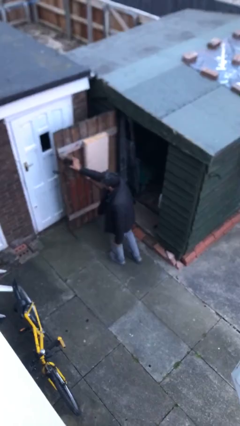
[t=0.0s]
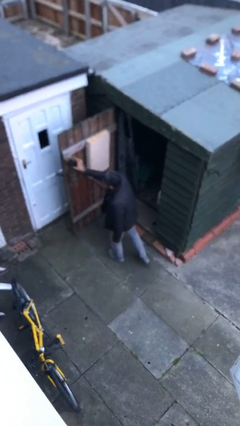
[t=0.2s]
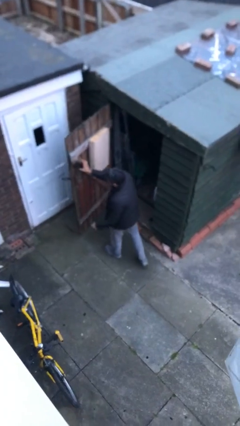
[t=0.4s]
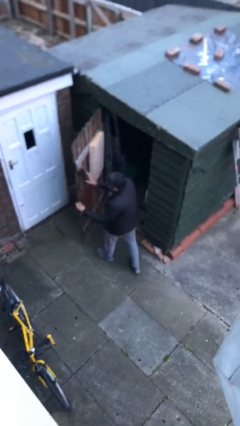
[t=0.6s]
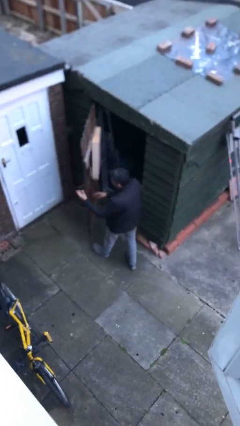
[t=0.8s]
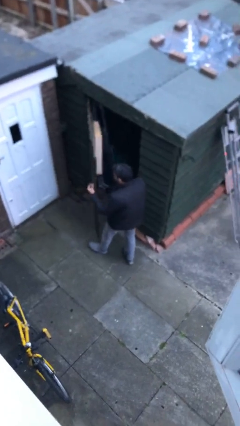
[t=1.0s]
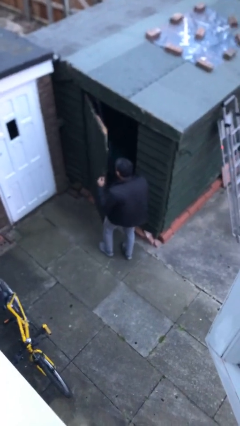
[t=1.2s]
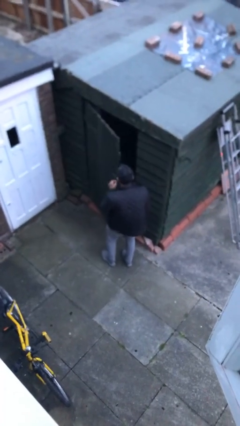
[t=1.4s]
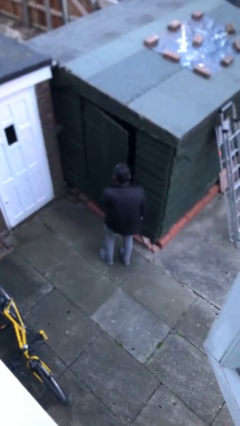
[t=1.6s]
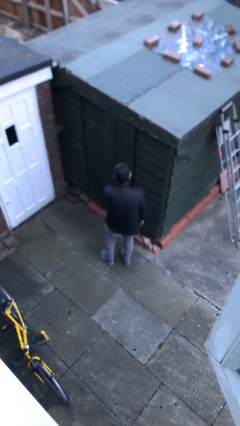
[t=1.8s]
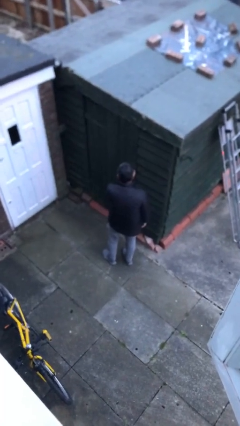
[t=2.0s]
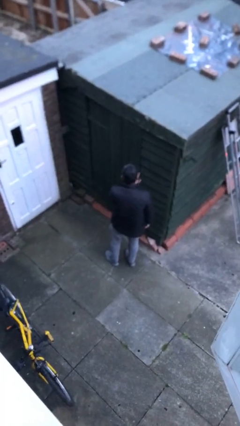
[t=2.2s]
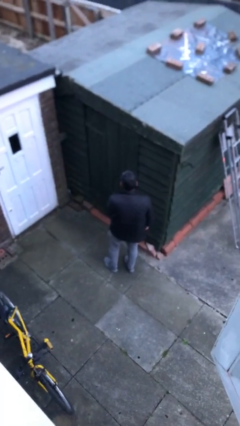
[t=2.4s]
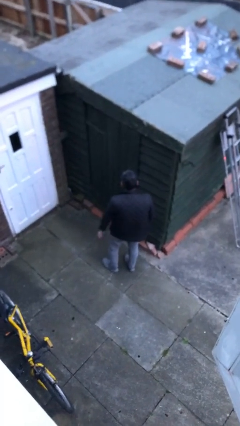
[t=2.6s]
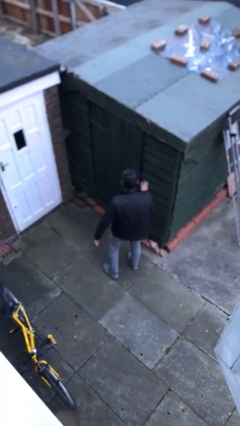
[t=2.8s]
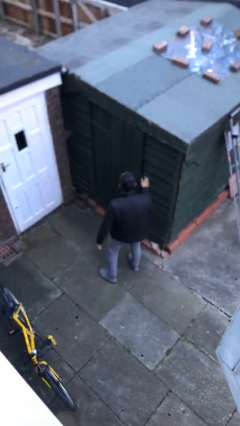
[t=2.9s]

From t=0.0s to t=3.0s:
person closes facility door

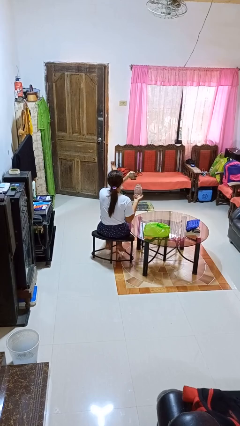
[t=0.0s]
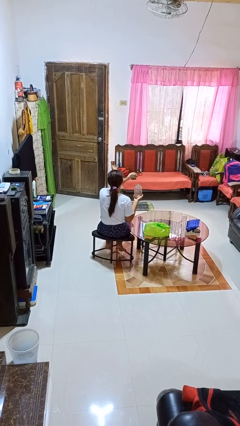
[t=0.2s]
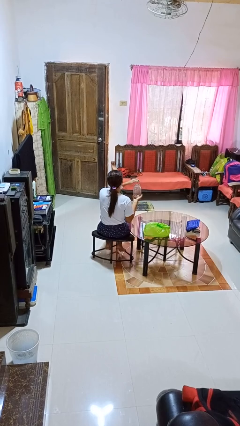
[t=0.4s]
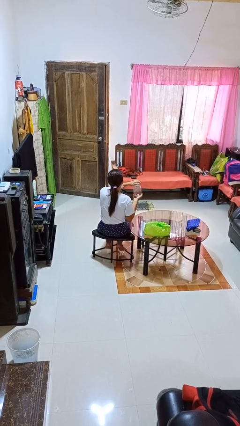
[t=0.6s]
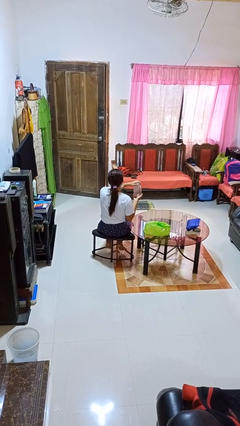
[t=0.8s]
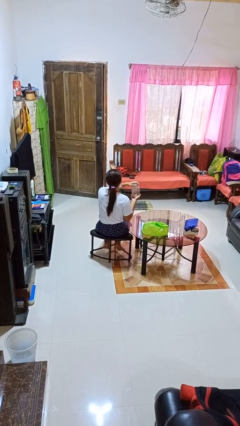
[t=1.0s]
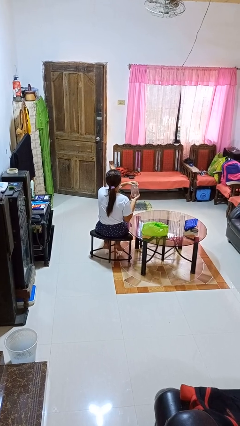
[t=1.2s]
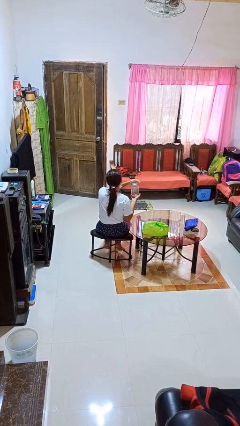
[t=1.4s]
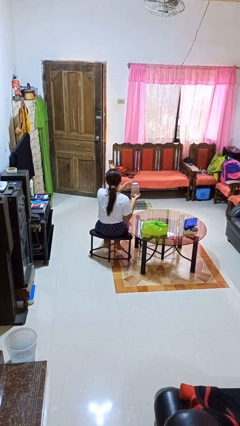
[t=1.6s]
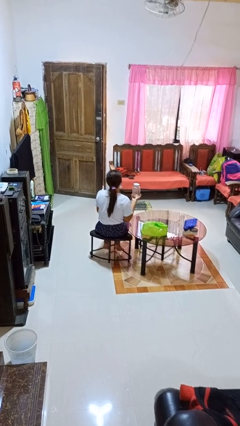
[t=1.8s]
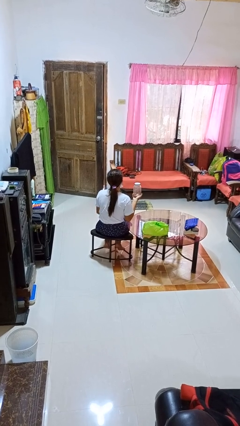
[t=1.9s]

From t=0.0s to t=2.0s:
person closes jar

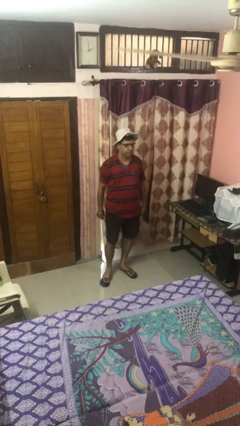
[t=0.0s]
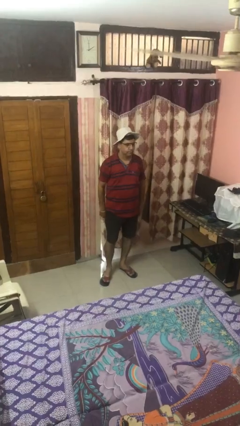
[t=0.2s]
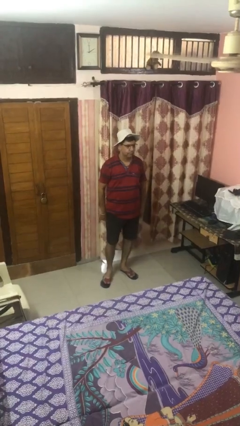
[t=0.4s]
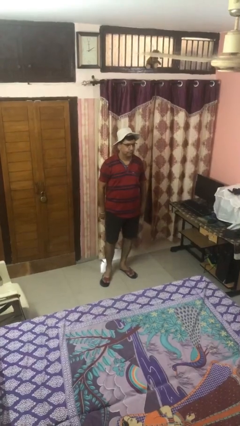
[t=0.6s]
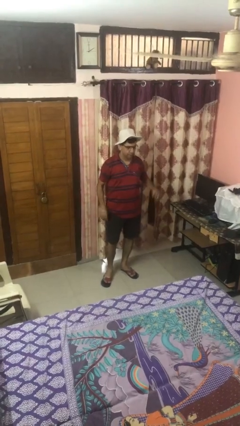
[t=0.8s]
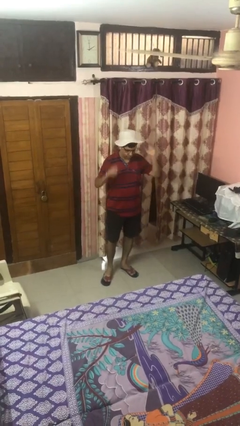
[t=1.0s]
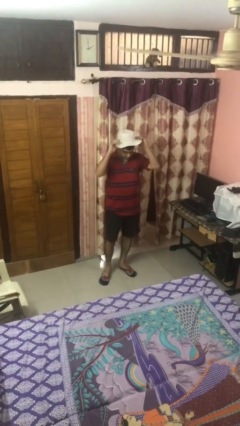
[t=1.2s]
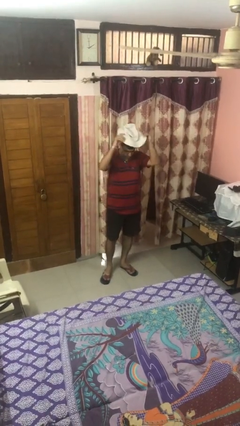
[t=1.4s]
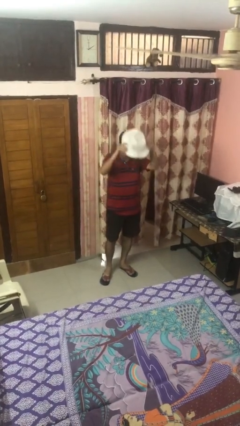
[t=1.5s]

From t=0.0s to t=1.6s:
person takes off hat

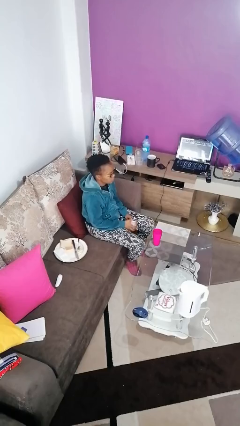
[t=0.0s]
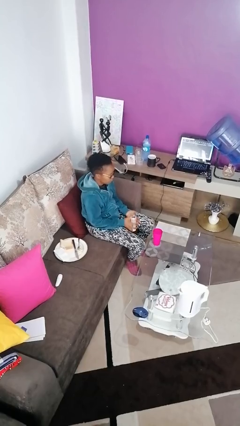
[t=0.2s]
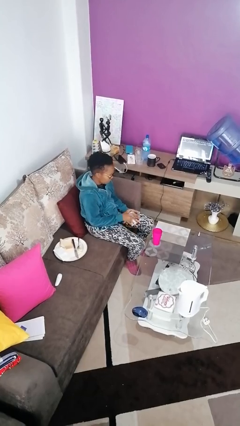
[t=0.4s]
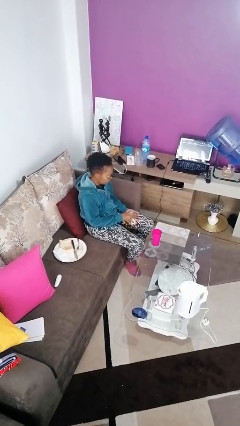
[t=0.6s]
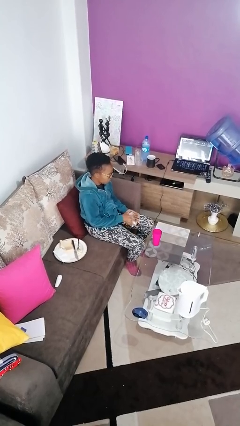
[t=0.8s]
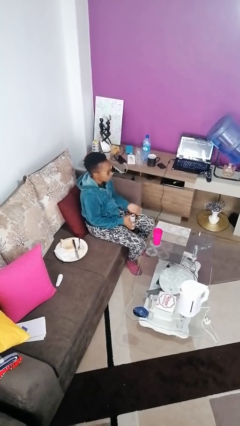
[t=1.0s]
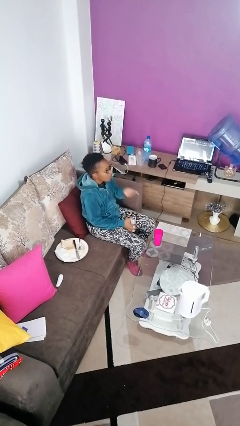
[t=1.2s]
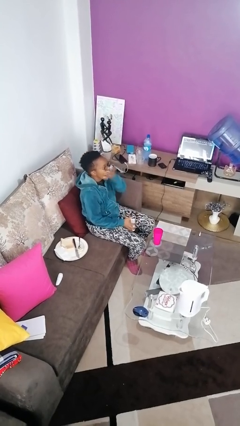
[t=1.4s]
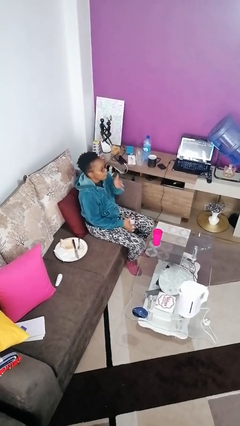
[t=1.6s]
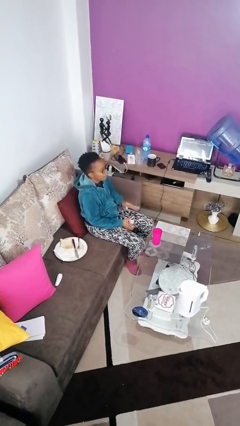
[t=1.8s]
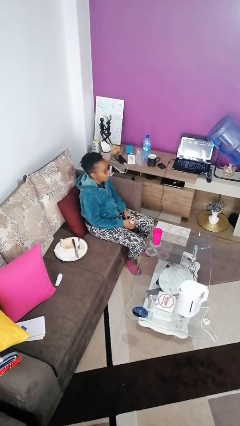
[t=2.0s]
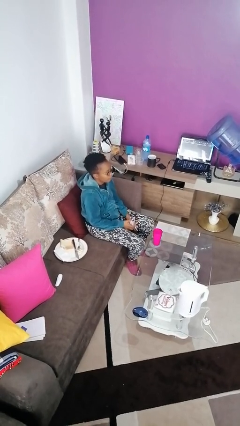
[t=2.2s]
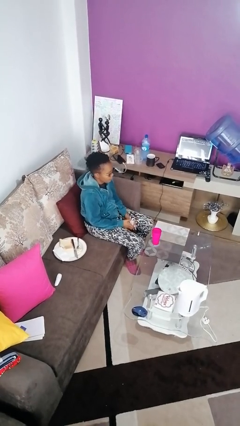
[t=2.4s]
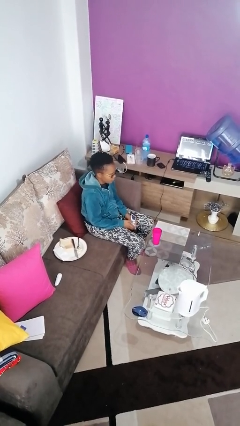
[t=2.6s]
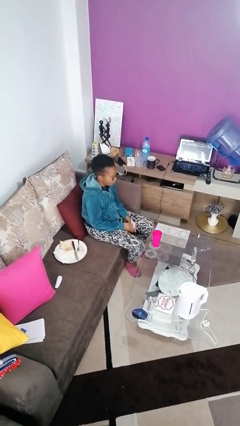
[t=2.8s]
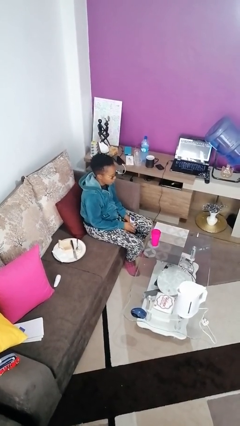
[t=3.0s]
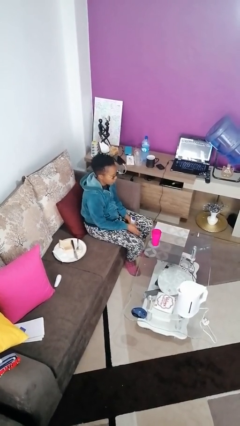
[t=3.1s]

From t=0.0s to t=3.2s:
person takes medicine pills

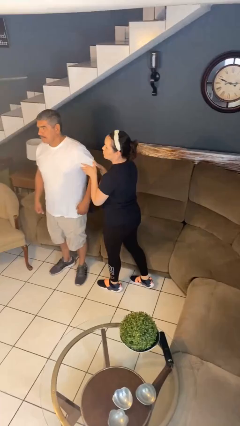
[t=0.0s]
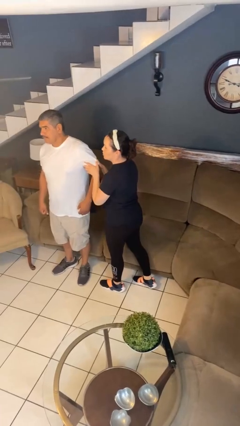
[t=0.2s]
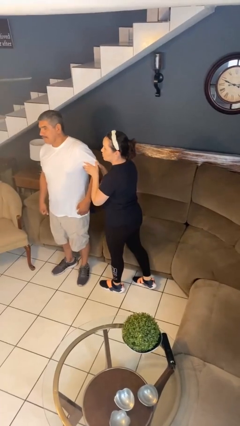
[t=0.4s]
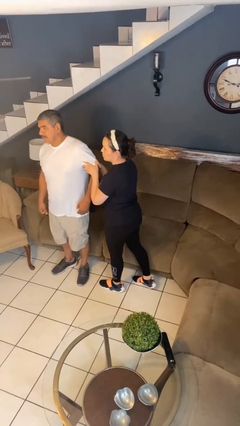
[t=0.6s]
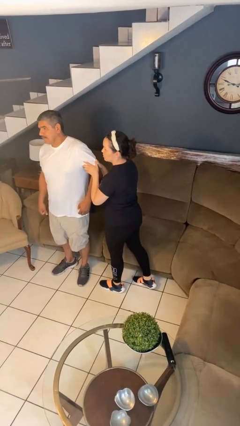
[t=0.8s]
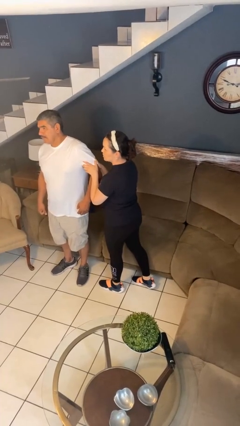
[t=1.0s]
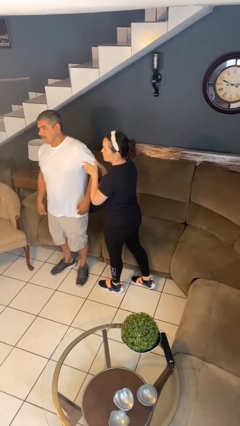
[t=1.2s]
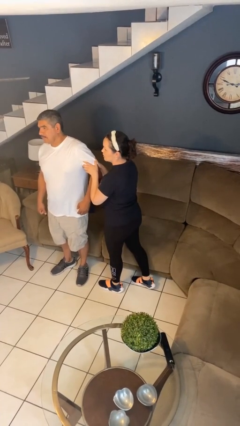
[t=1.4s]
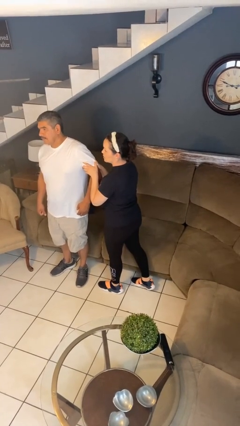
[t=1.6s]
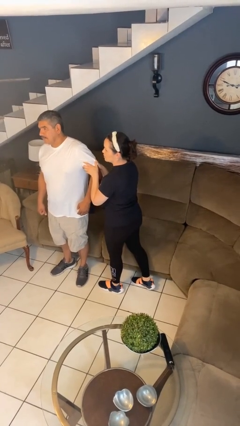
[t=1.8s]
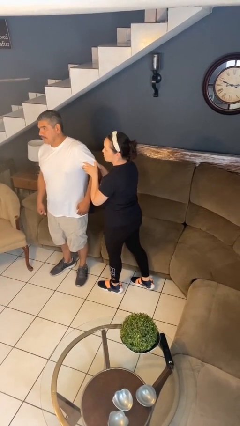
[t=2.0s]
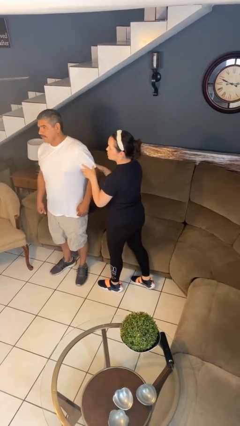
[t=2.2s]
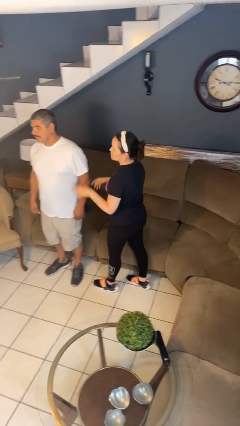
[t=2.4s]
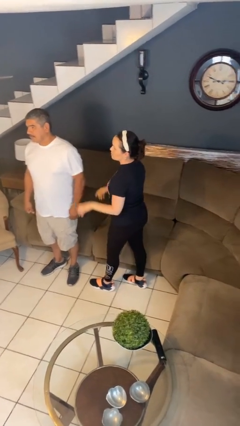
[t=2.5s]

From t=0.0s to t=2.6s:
person grabs person by bicep

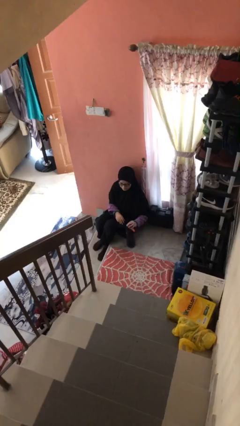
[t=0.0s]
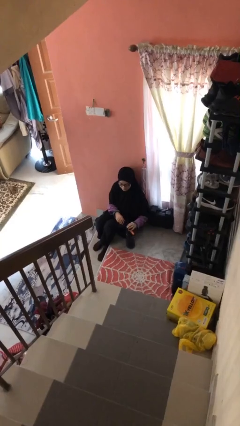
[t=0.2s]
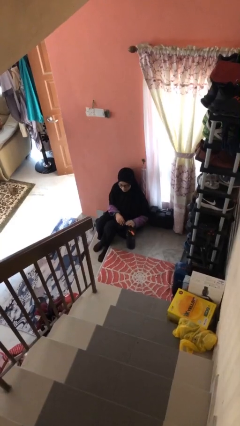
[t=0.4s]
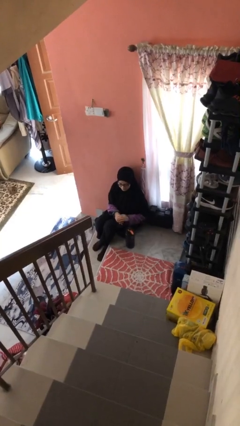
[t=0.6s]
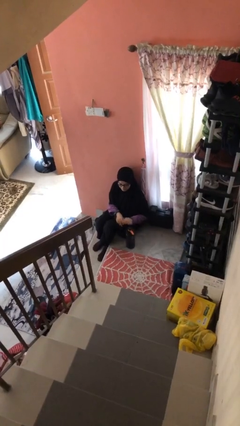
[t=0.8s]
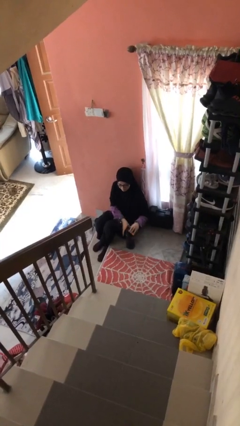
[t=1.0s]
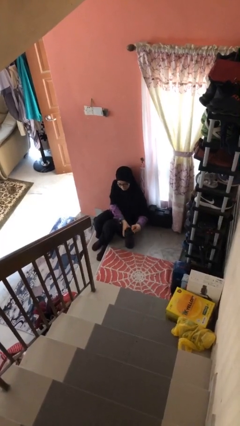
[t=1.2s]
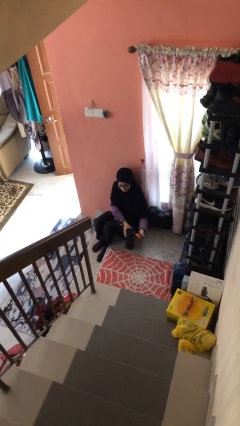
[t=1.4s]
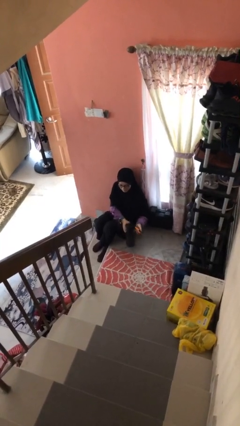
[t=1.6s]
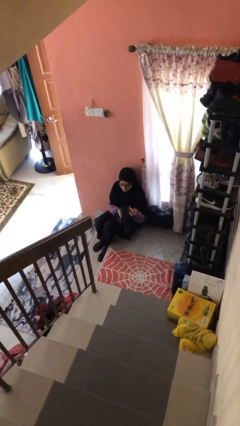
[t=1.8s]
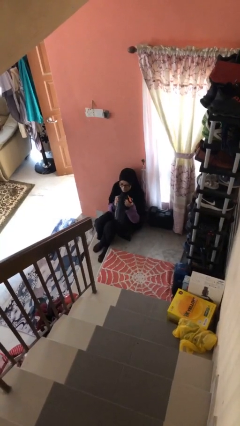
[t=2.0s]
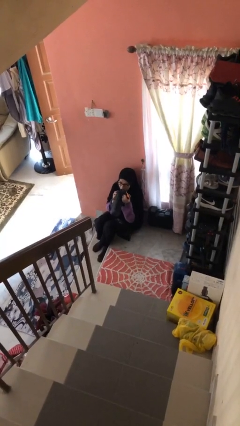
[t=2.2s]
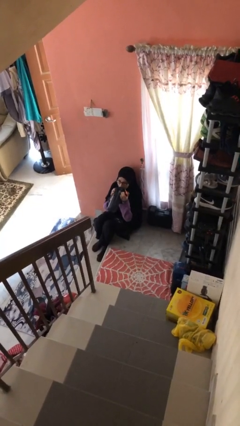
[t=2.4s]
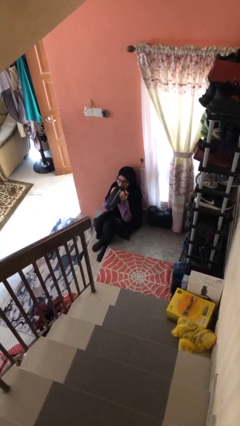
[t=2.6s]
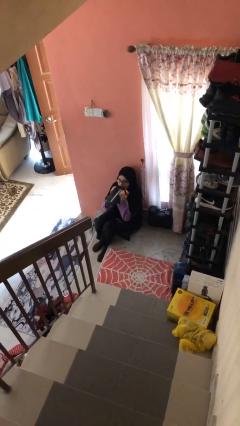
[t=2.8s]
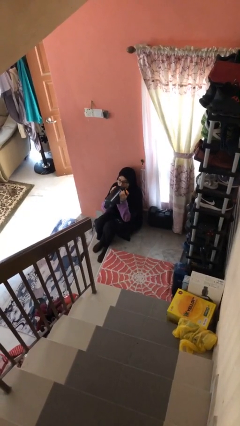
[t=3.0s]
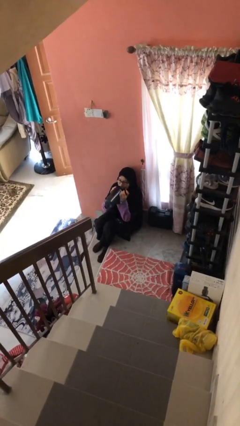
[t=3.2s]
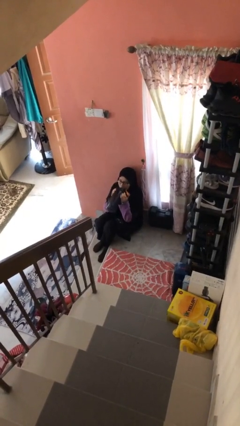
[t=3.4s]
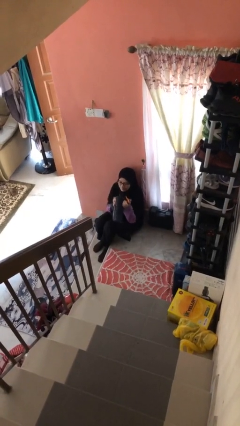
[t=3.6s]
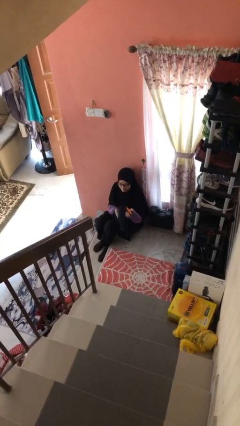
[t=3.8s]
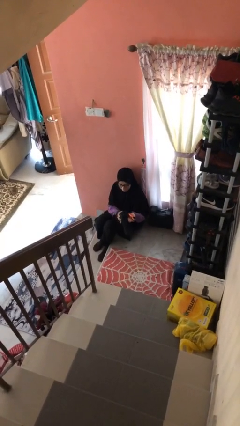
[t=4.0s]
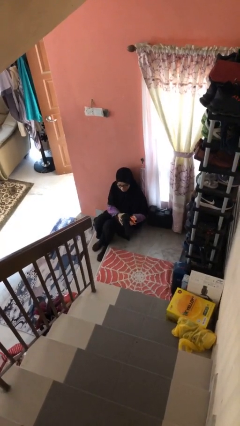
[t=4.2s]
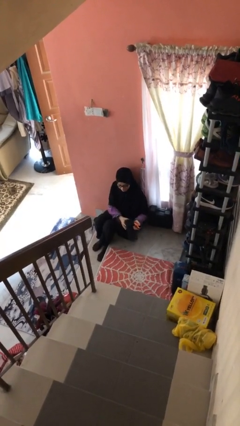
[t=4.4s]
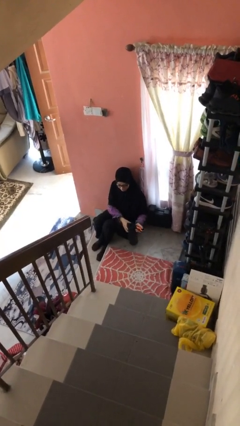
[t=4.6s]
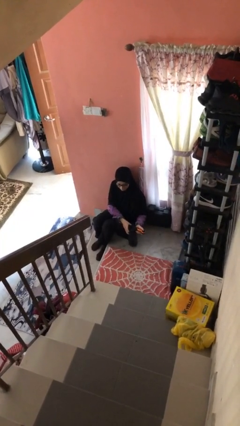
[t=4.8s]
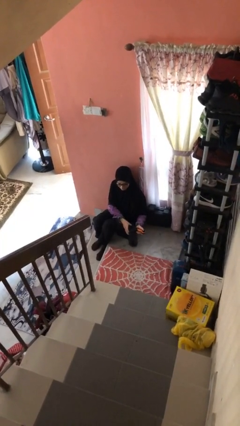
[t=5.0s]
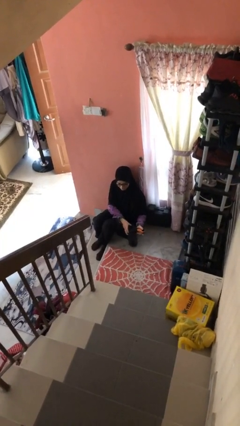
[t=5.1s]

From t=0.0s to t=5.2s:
person drinks from bottle
